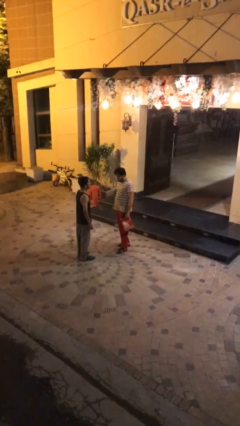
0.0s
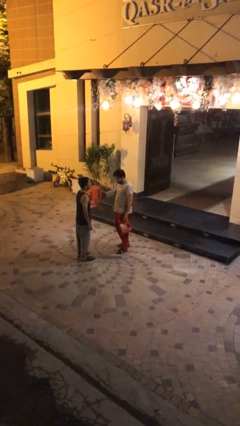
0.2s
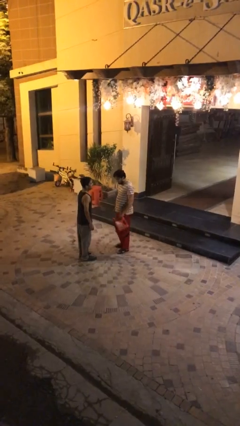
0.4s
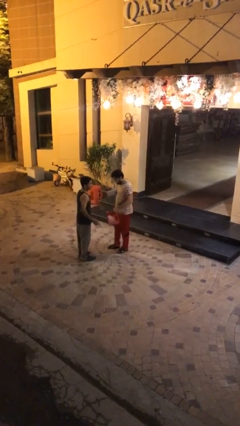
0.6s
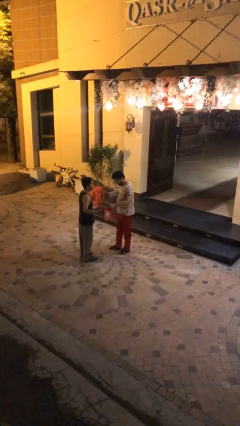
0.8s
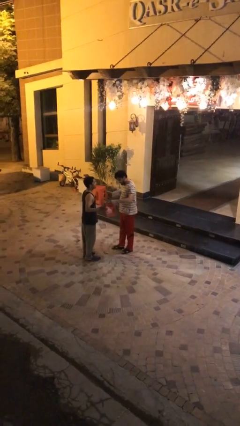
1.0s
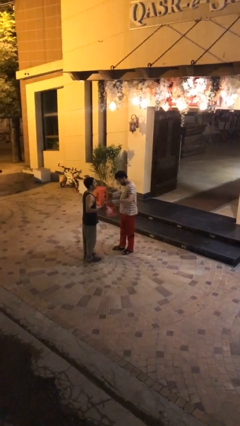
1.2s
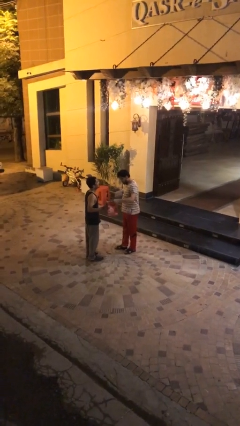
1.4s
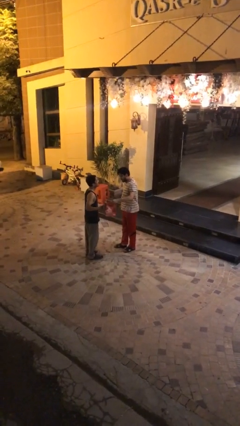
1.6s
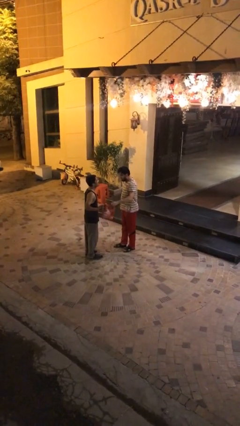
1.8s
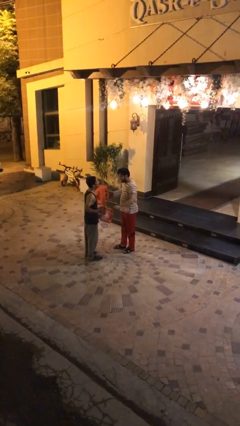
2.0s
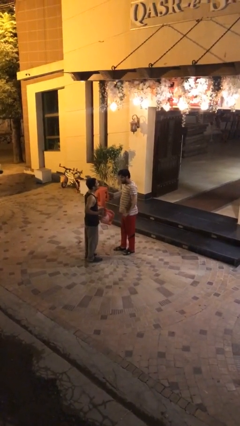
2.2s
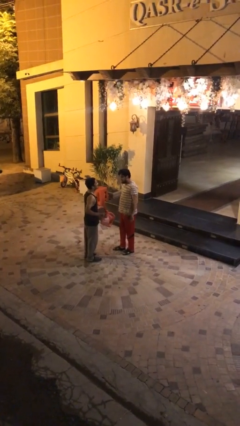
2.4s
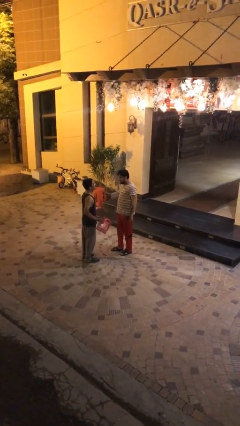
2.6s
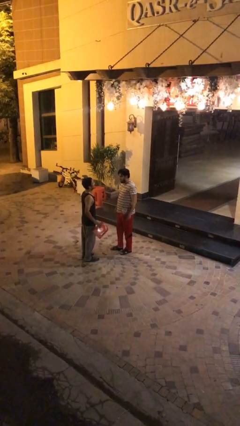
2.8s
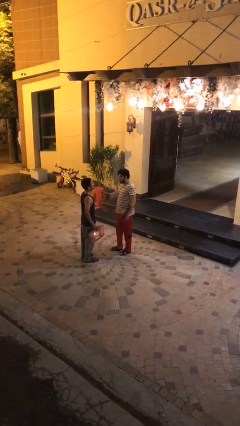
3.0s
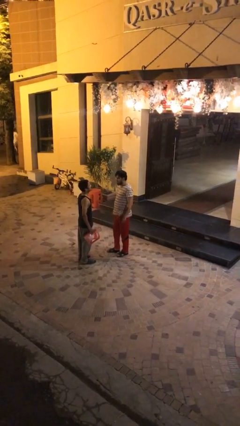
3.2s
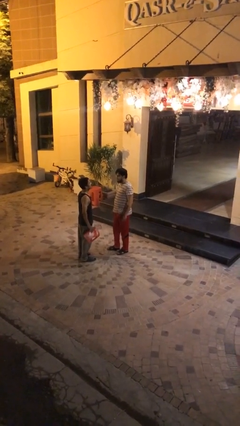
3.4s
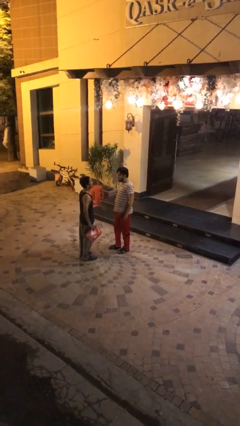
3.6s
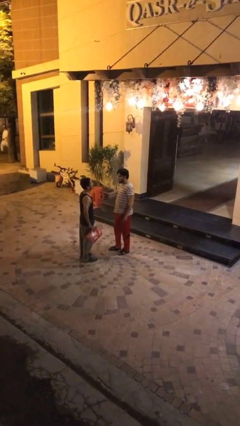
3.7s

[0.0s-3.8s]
person transfers object to person

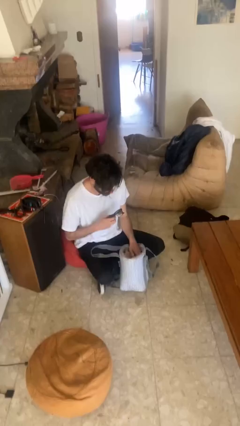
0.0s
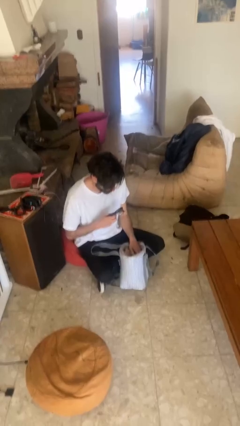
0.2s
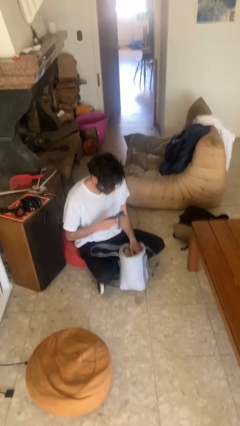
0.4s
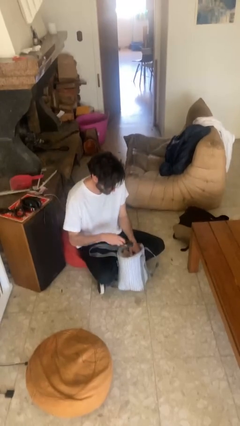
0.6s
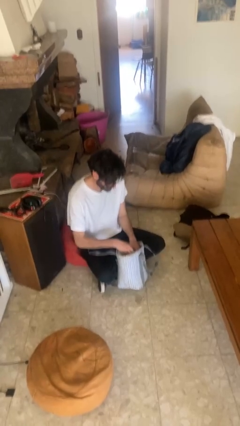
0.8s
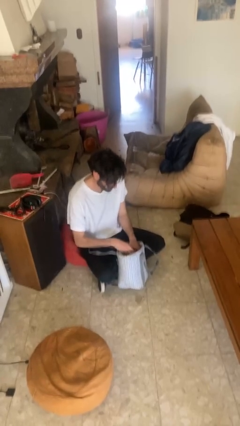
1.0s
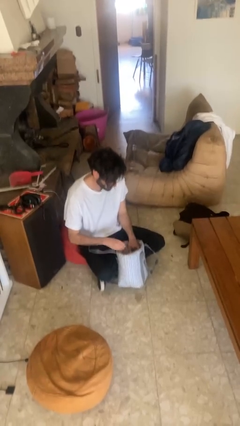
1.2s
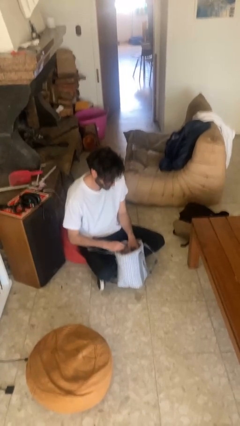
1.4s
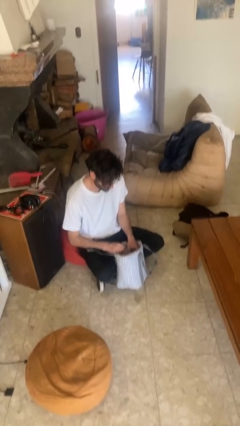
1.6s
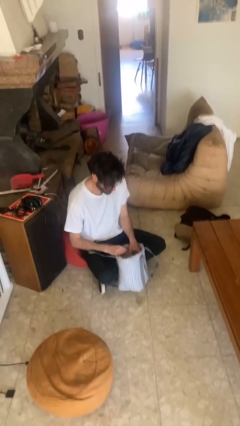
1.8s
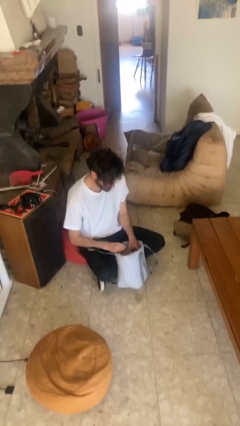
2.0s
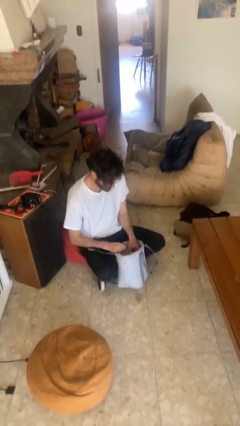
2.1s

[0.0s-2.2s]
person puts object into purse

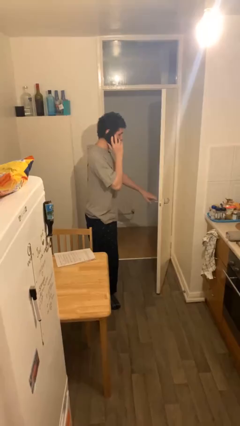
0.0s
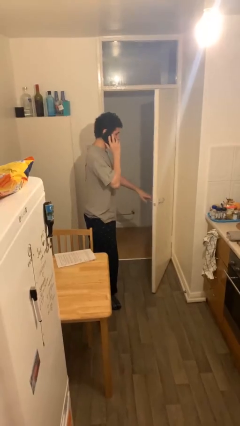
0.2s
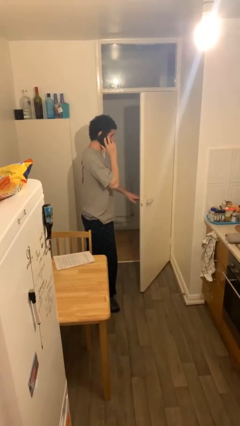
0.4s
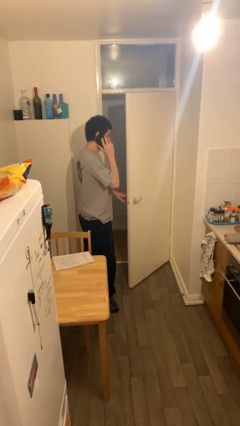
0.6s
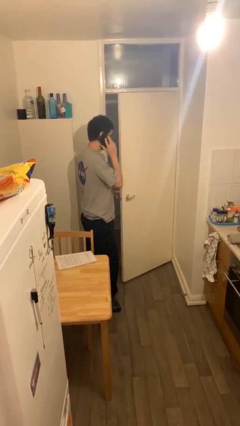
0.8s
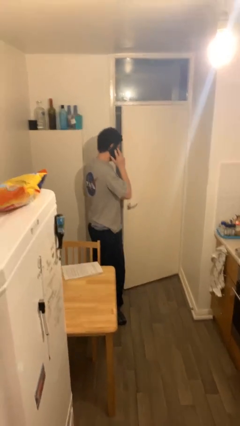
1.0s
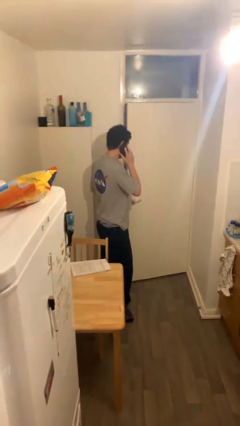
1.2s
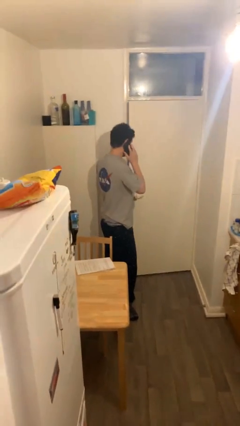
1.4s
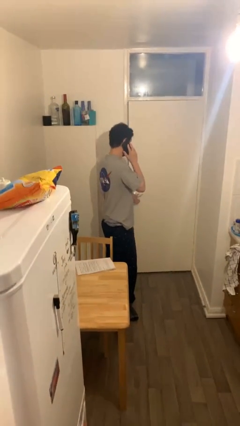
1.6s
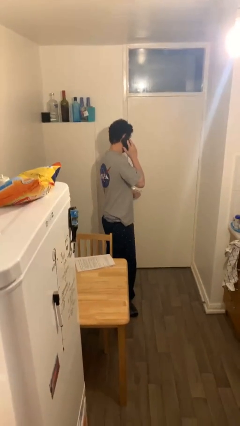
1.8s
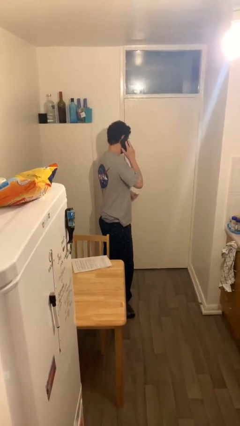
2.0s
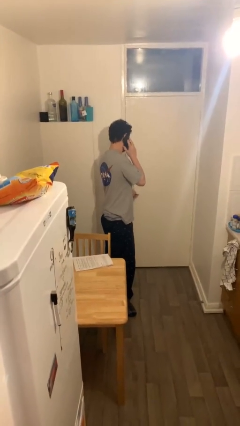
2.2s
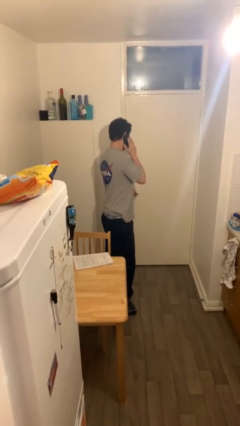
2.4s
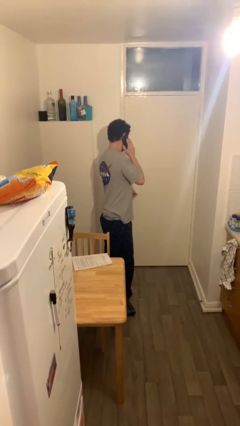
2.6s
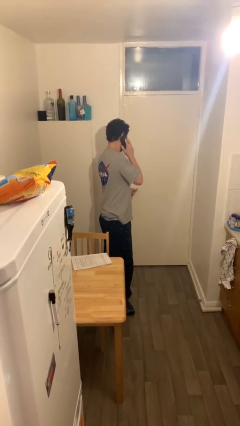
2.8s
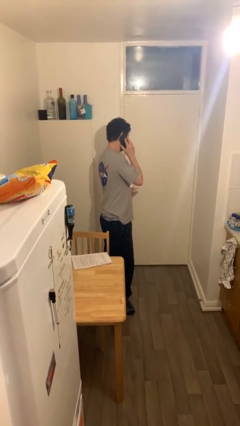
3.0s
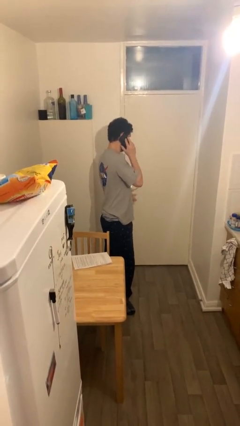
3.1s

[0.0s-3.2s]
person closes facility door

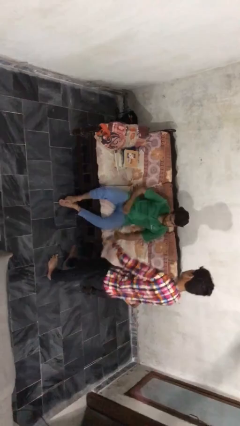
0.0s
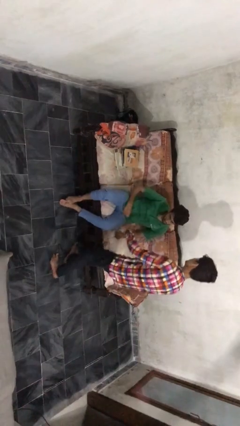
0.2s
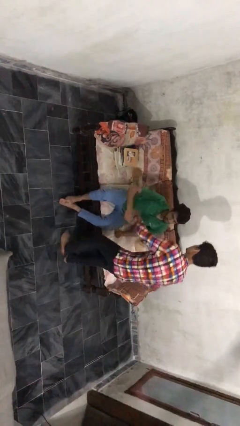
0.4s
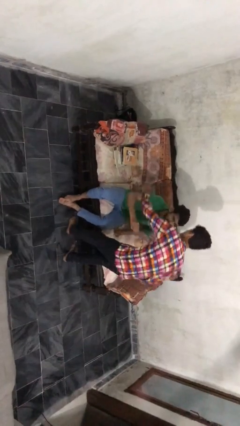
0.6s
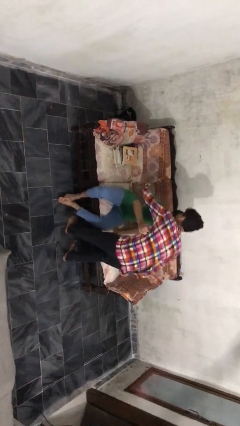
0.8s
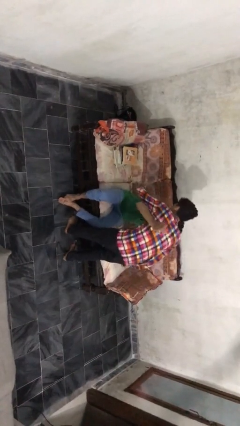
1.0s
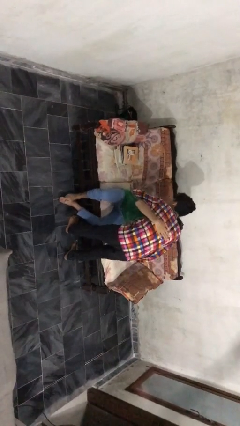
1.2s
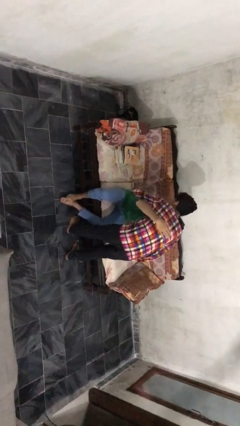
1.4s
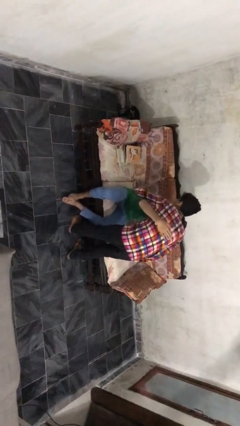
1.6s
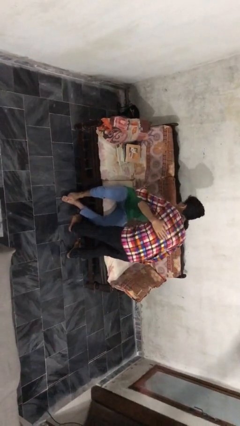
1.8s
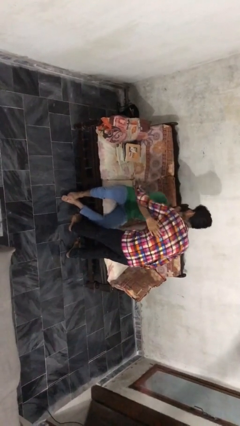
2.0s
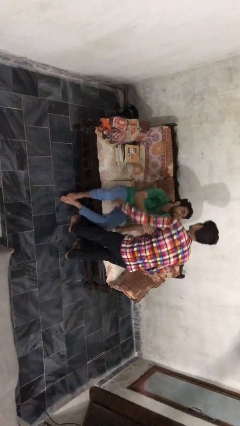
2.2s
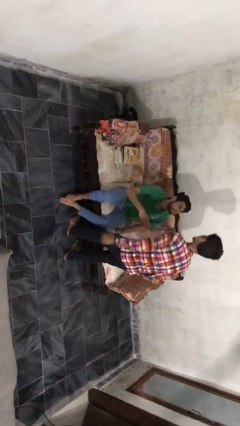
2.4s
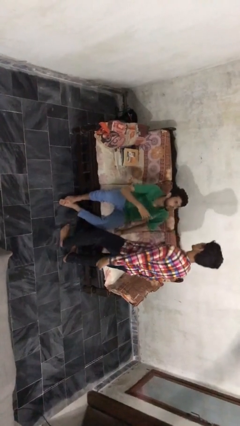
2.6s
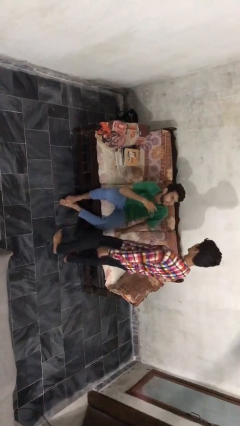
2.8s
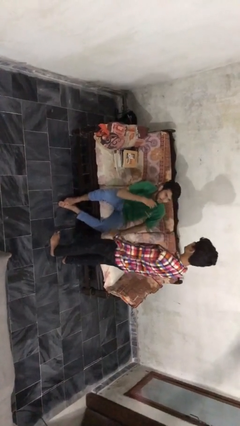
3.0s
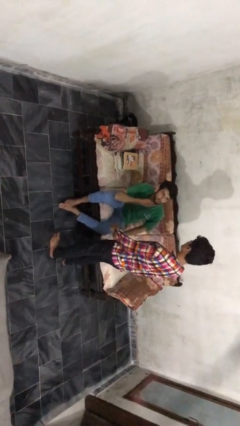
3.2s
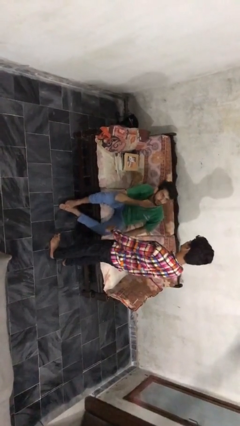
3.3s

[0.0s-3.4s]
person embraces person

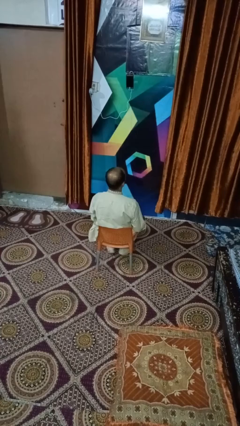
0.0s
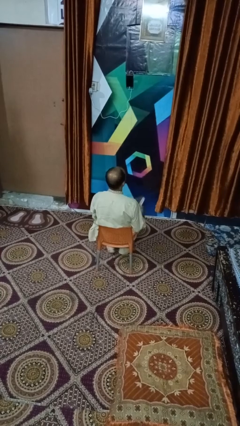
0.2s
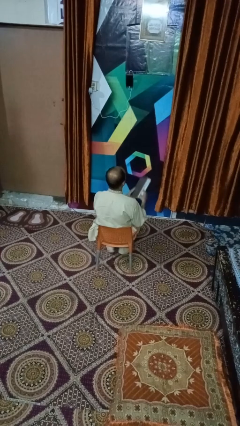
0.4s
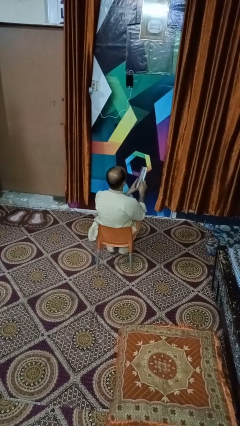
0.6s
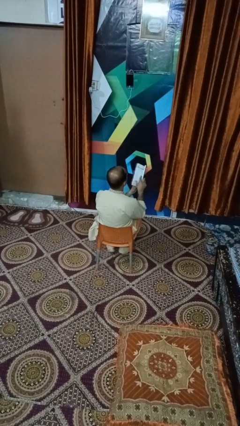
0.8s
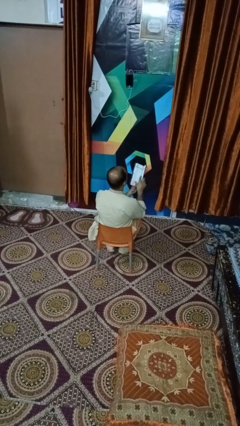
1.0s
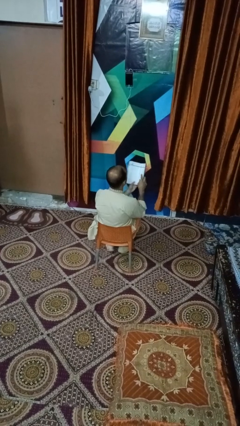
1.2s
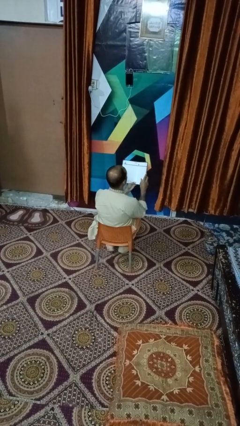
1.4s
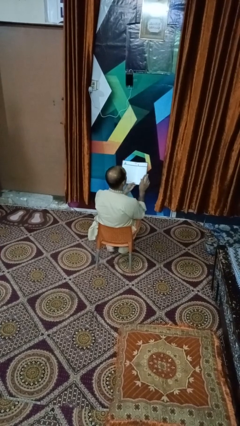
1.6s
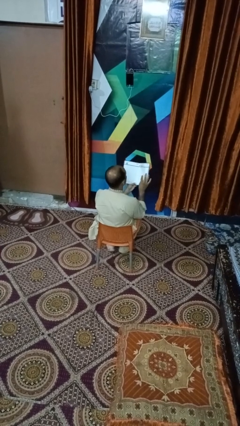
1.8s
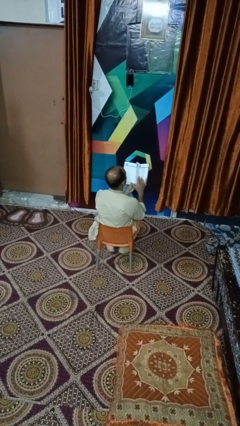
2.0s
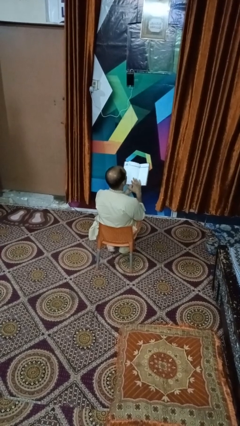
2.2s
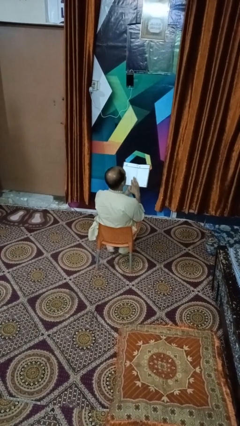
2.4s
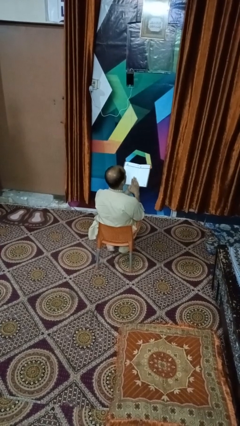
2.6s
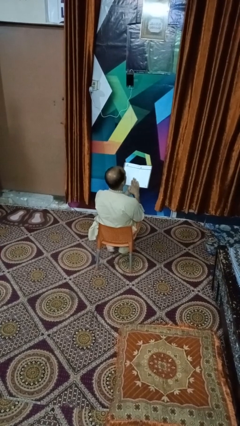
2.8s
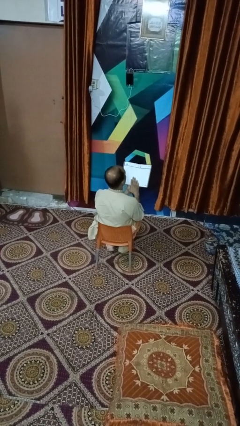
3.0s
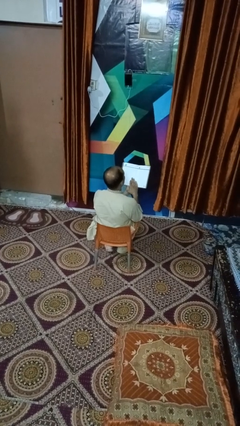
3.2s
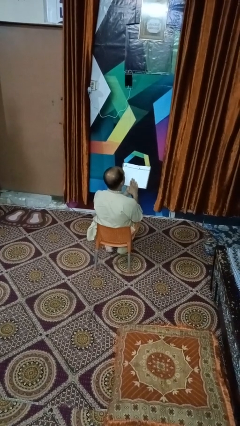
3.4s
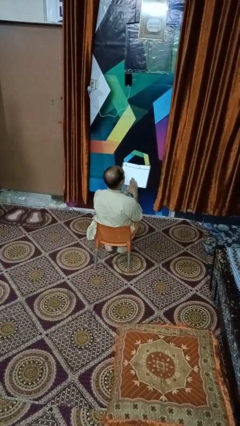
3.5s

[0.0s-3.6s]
person reads magazine

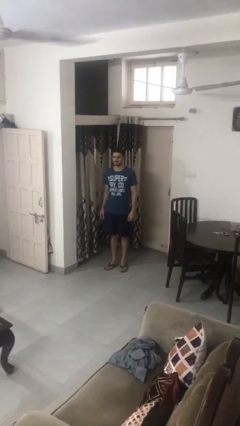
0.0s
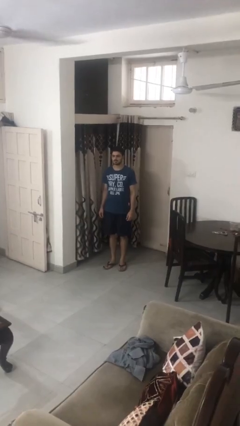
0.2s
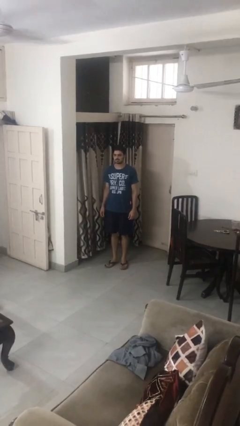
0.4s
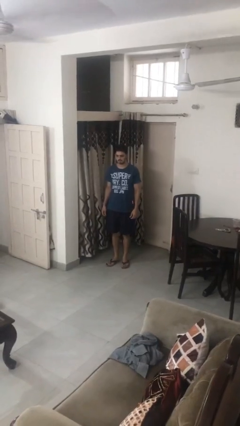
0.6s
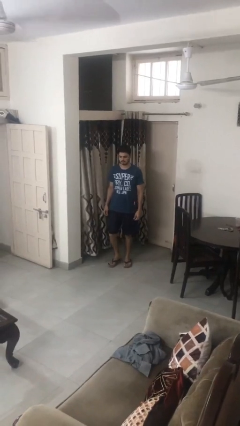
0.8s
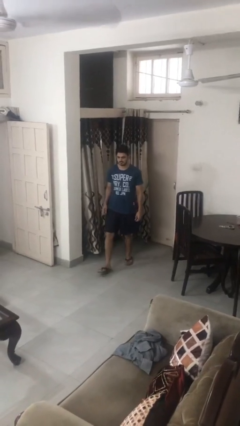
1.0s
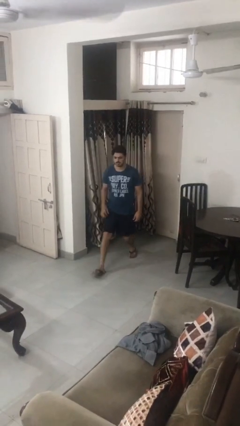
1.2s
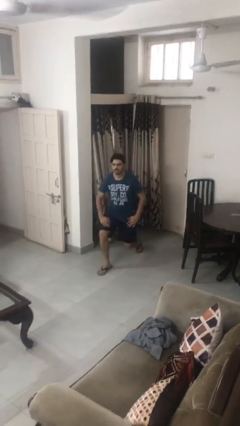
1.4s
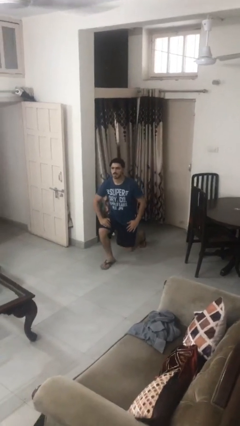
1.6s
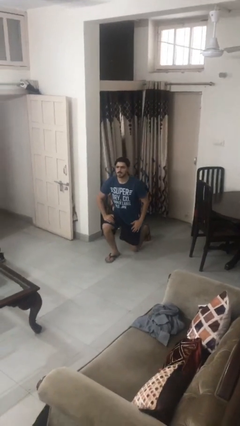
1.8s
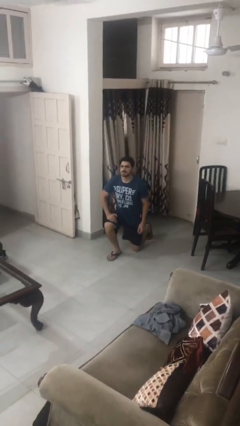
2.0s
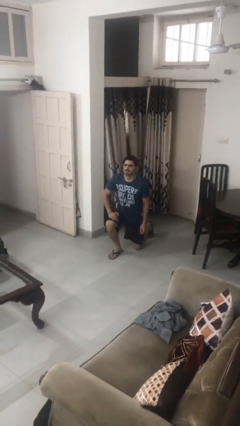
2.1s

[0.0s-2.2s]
person kneels
